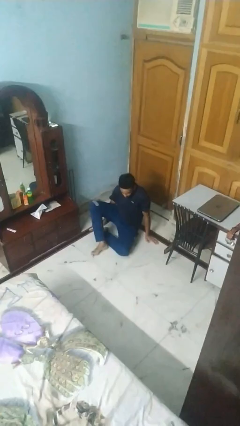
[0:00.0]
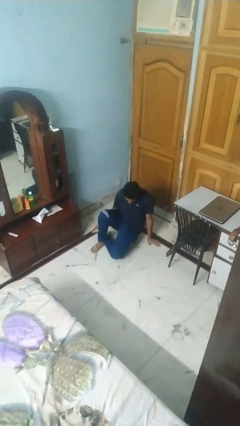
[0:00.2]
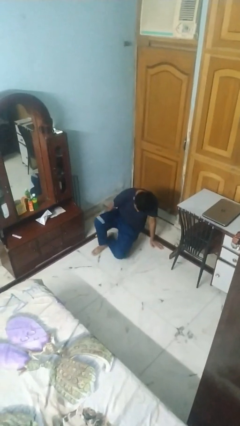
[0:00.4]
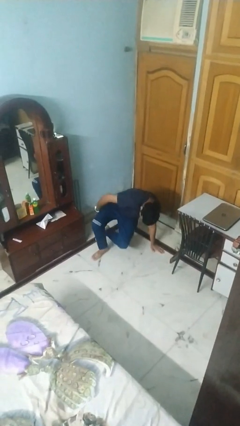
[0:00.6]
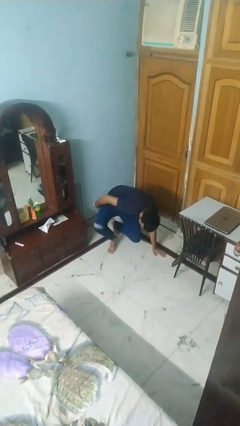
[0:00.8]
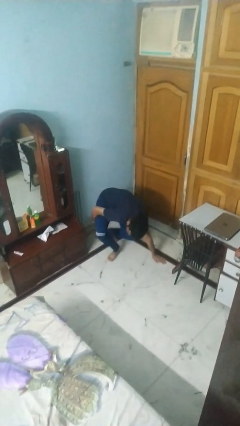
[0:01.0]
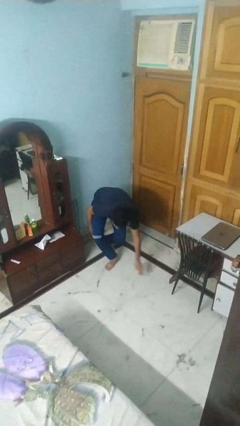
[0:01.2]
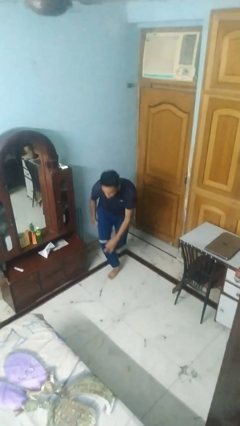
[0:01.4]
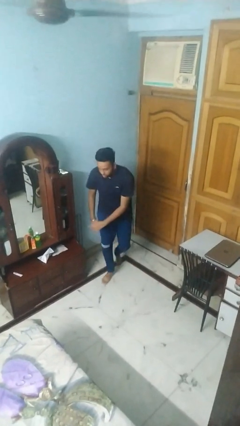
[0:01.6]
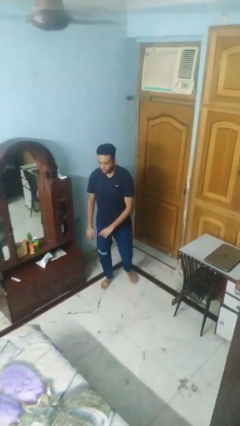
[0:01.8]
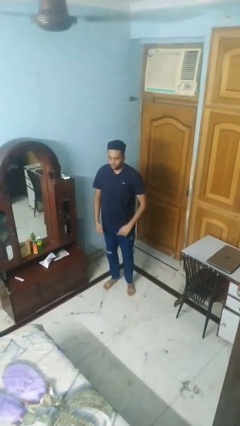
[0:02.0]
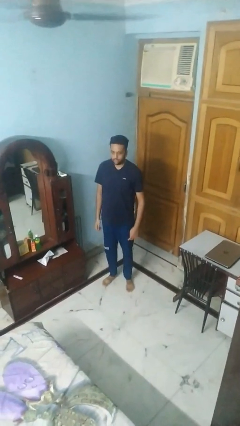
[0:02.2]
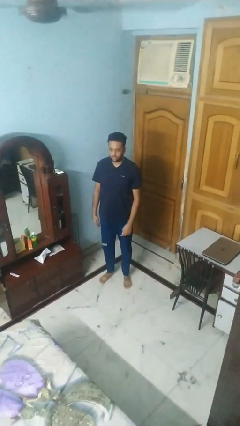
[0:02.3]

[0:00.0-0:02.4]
person stands up from floor

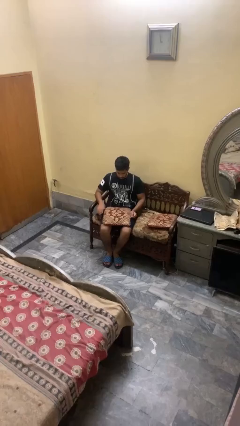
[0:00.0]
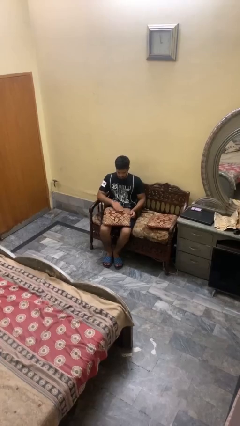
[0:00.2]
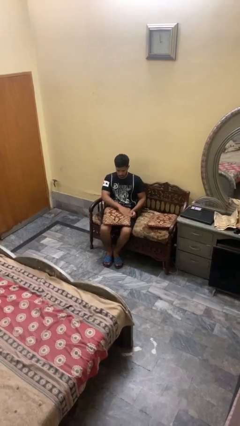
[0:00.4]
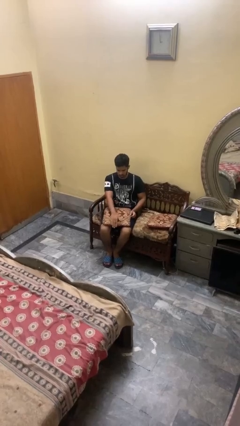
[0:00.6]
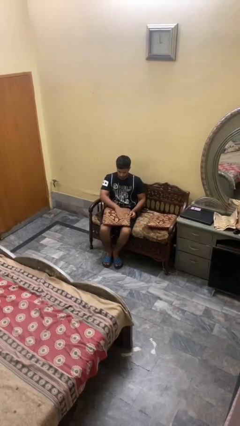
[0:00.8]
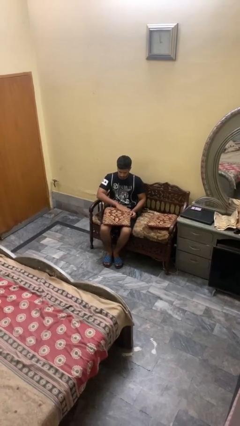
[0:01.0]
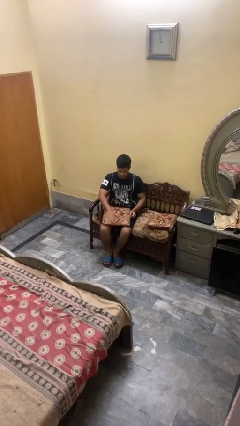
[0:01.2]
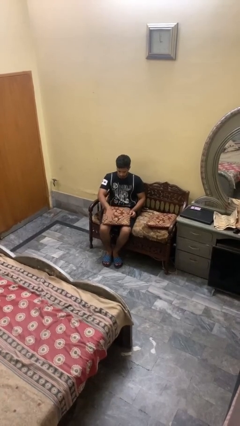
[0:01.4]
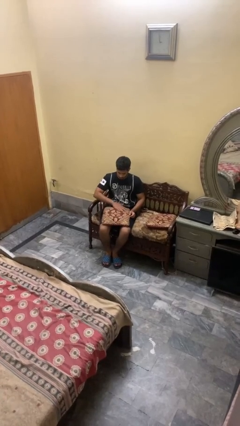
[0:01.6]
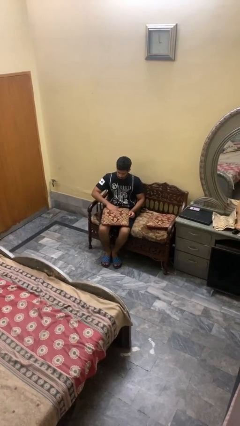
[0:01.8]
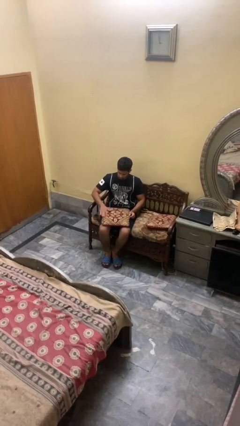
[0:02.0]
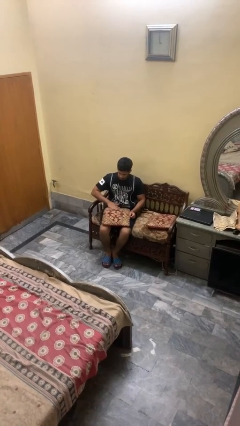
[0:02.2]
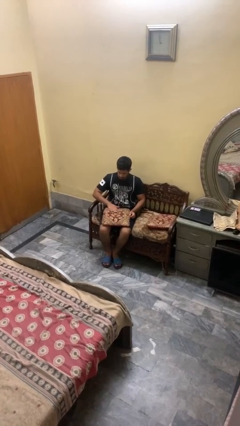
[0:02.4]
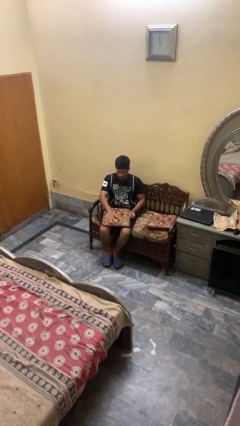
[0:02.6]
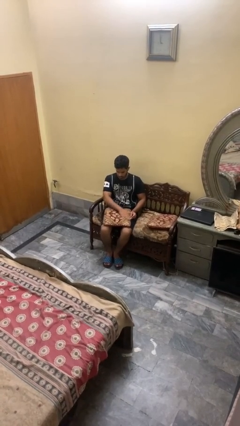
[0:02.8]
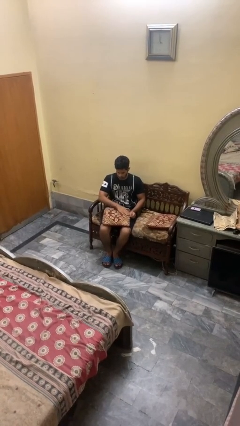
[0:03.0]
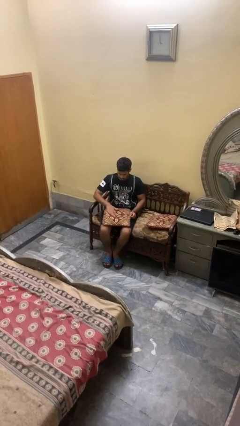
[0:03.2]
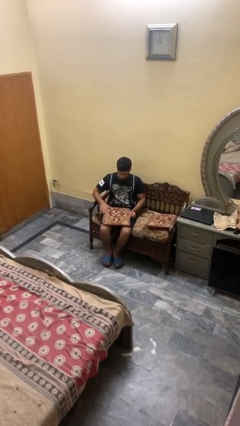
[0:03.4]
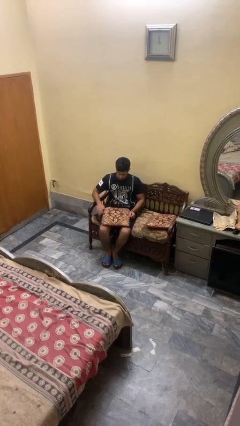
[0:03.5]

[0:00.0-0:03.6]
person waves hand over object

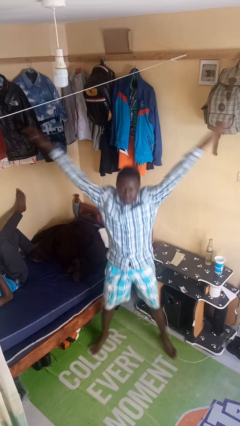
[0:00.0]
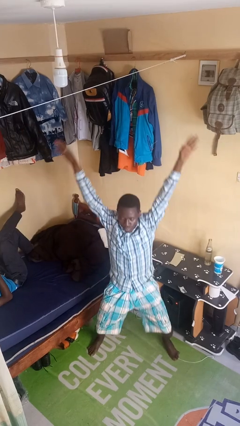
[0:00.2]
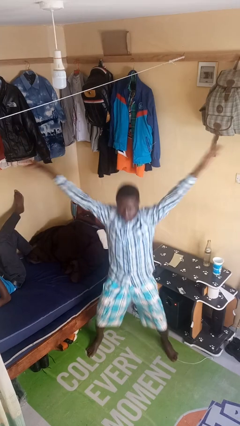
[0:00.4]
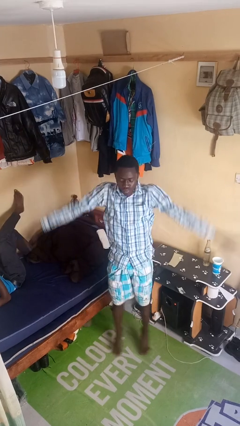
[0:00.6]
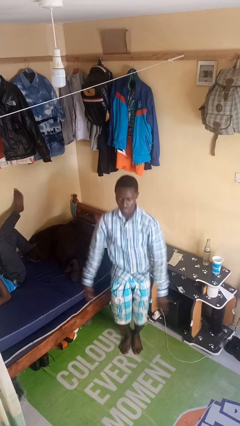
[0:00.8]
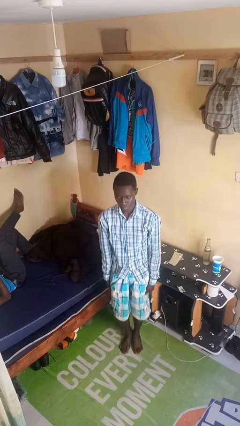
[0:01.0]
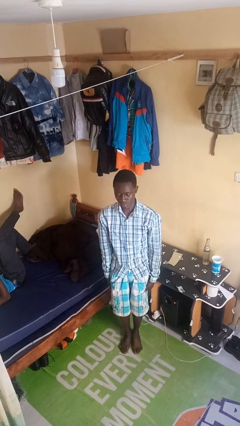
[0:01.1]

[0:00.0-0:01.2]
person exercises with jumping jacks

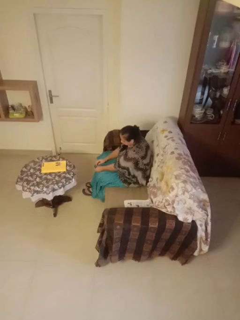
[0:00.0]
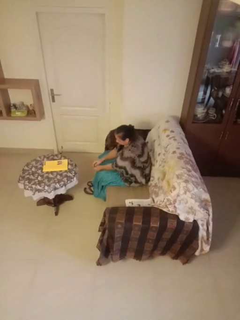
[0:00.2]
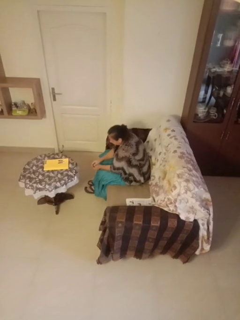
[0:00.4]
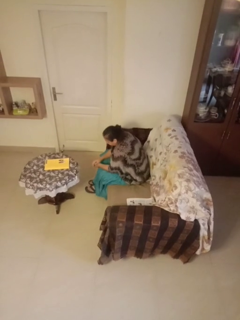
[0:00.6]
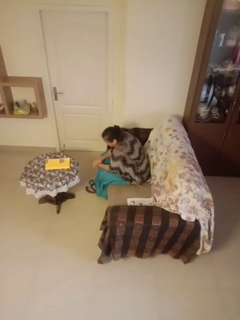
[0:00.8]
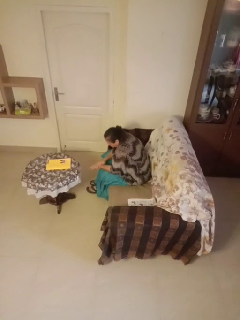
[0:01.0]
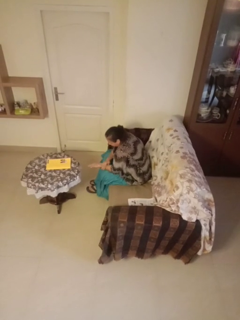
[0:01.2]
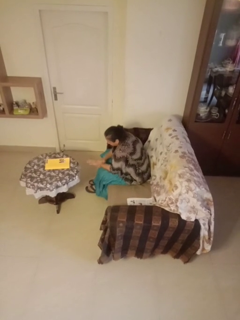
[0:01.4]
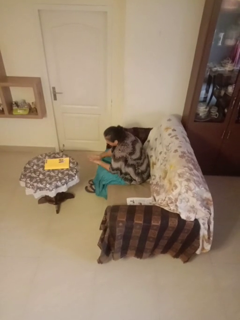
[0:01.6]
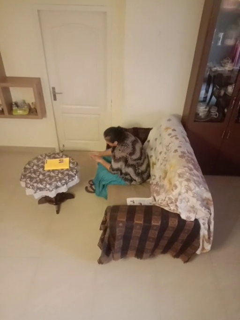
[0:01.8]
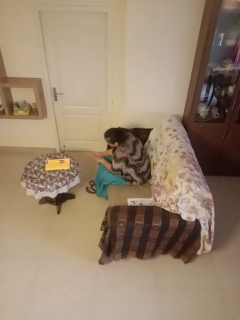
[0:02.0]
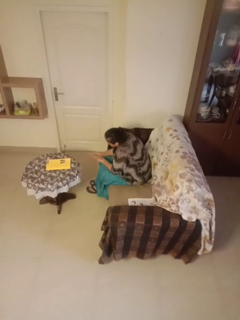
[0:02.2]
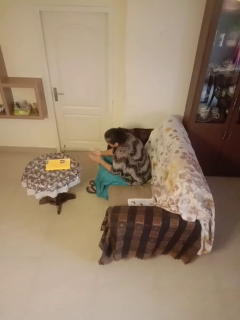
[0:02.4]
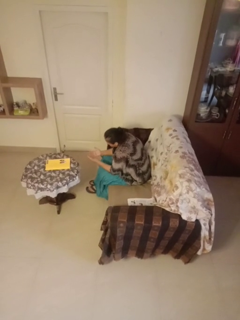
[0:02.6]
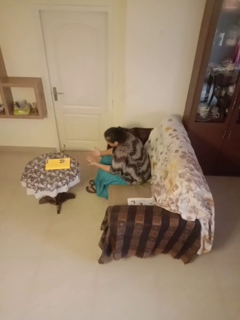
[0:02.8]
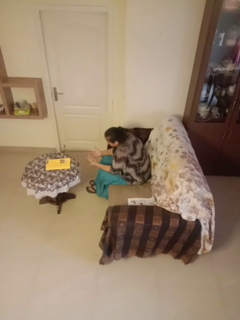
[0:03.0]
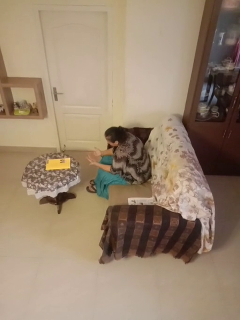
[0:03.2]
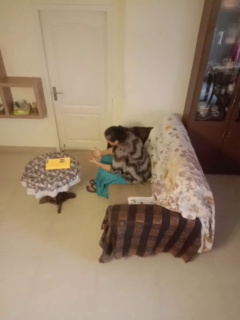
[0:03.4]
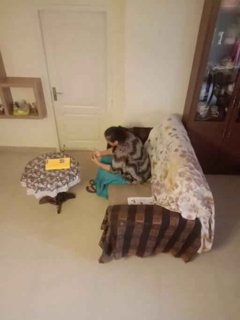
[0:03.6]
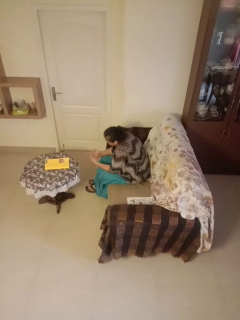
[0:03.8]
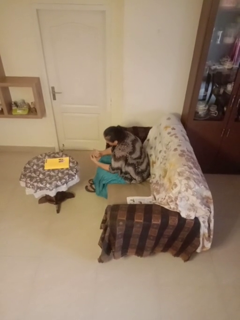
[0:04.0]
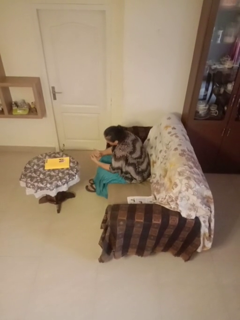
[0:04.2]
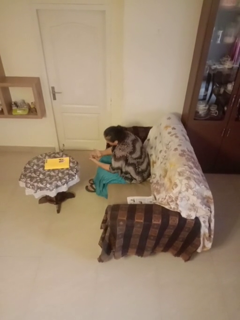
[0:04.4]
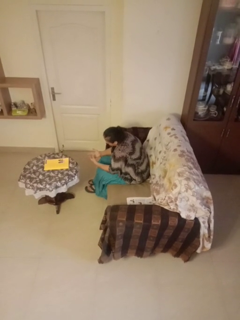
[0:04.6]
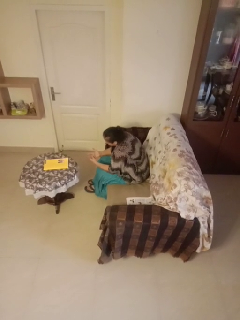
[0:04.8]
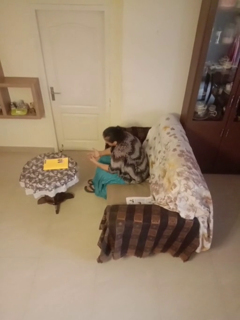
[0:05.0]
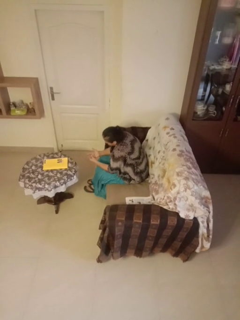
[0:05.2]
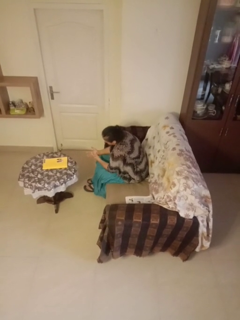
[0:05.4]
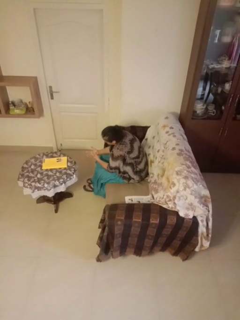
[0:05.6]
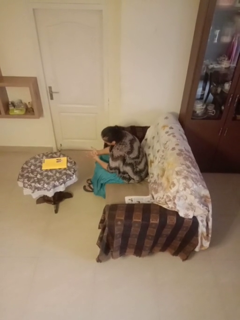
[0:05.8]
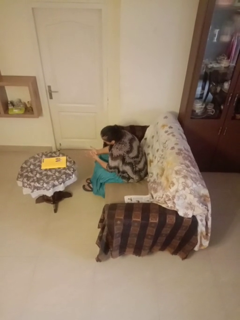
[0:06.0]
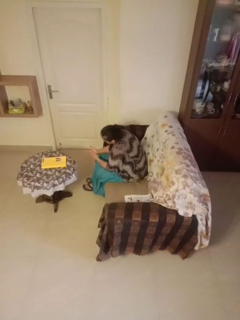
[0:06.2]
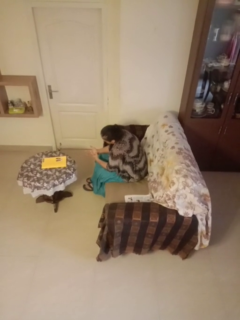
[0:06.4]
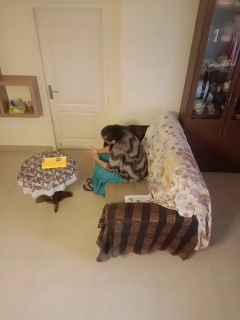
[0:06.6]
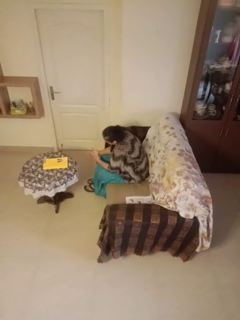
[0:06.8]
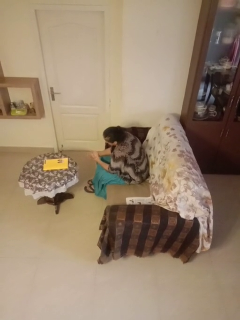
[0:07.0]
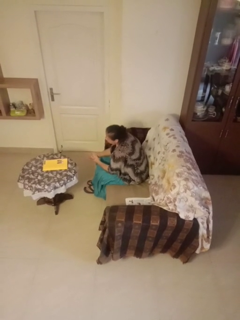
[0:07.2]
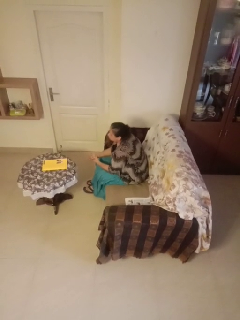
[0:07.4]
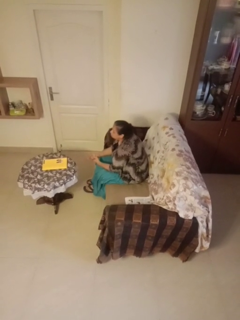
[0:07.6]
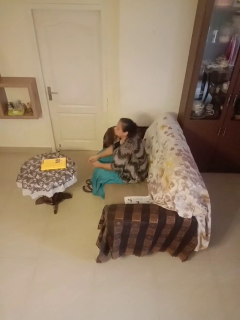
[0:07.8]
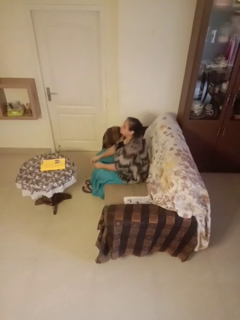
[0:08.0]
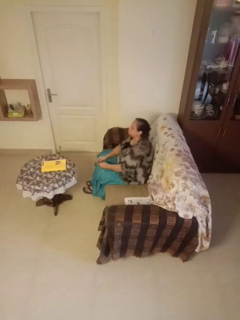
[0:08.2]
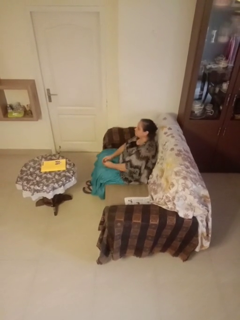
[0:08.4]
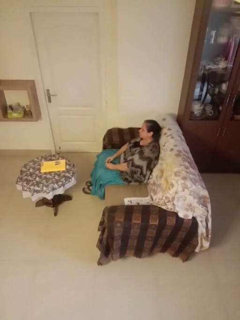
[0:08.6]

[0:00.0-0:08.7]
person looks at hands in lap

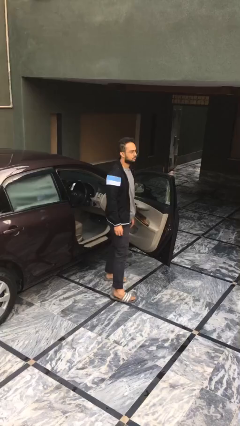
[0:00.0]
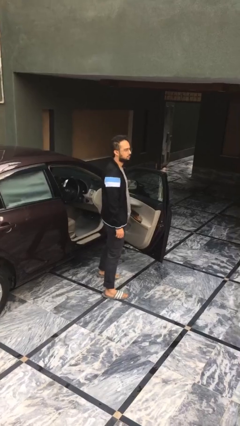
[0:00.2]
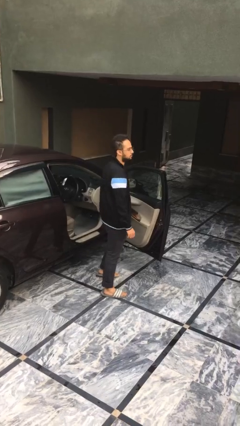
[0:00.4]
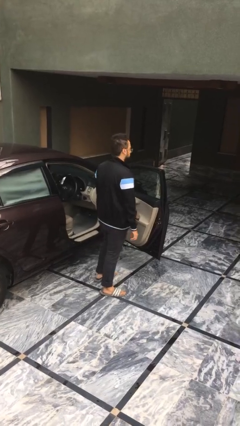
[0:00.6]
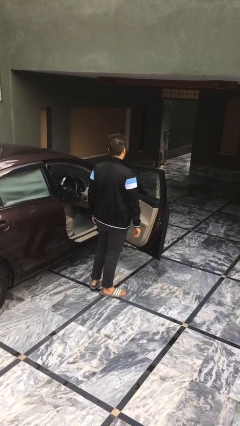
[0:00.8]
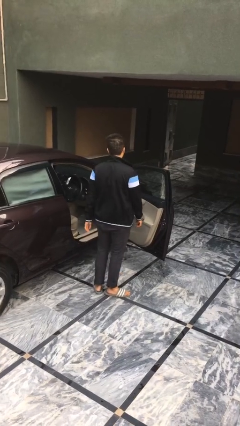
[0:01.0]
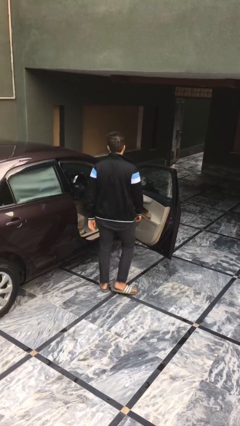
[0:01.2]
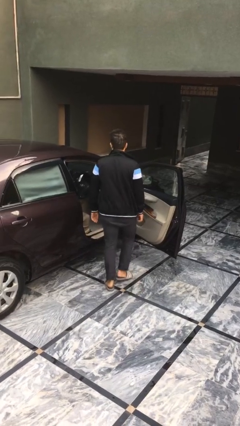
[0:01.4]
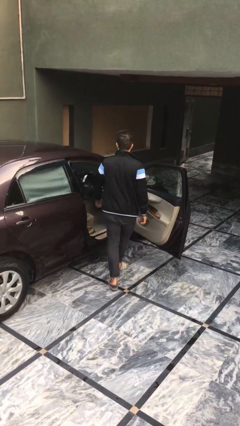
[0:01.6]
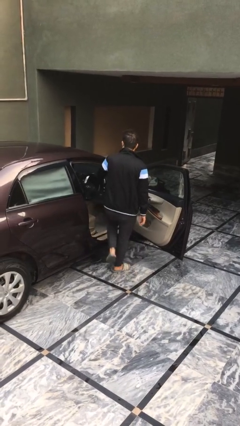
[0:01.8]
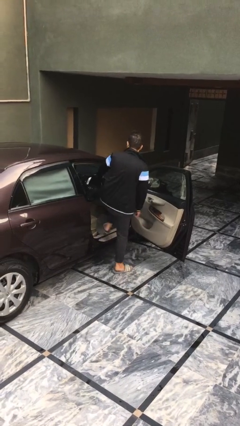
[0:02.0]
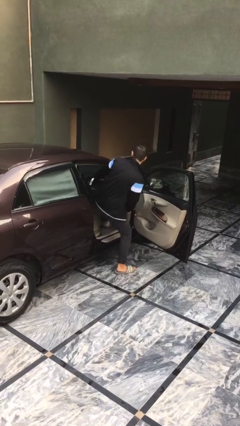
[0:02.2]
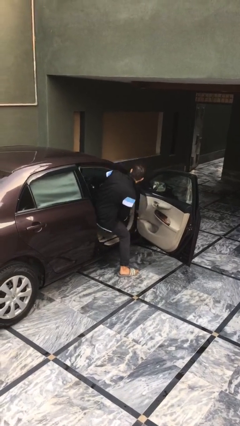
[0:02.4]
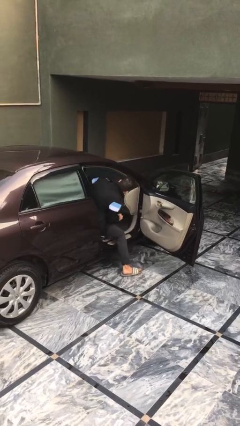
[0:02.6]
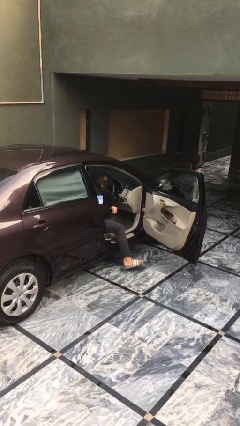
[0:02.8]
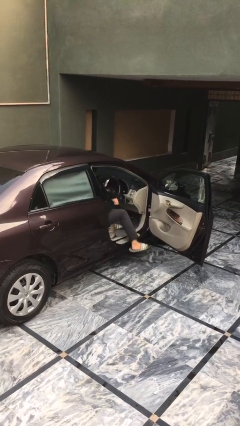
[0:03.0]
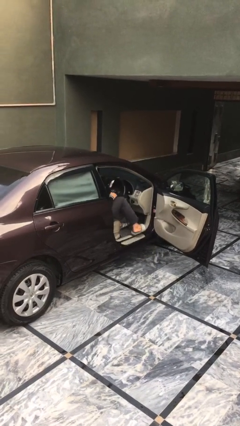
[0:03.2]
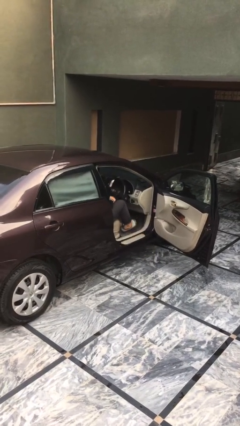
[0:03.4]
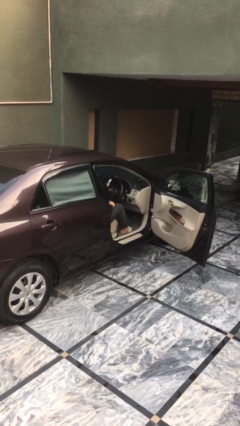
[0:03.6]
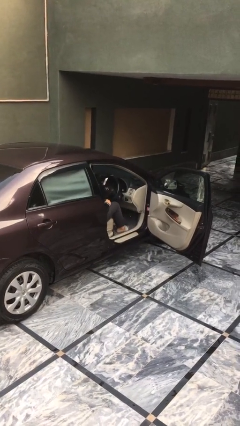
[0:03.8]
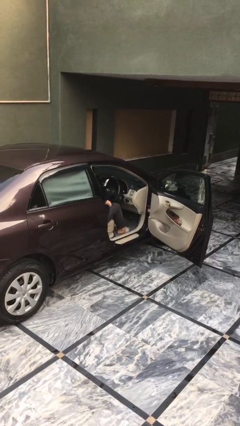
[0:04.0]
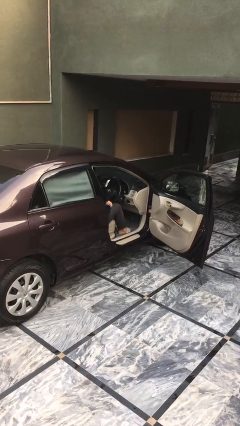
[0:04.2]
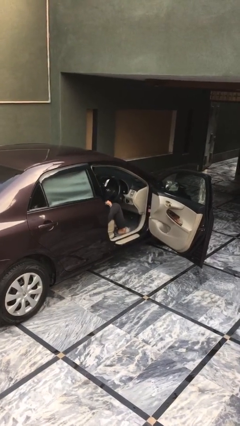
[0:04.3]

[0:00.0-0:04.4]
person enters car
